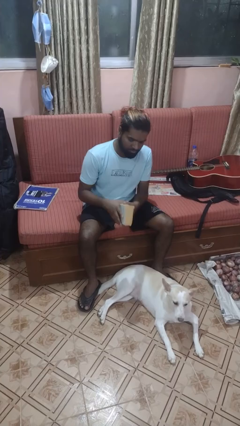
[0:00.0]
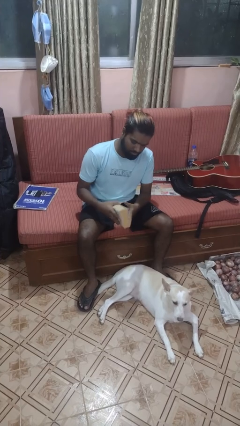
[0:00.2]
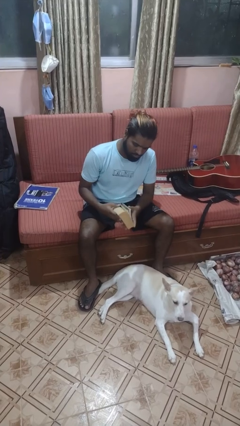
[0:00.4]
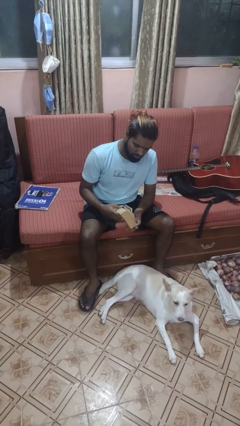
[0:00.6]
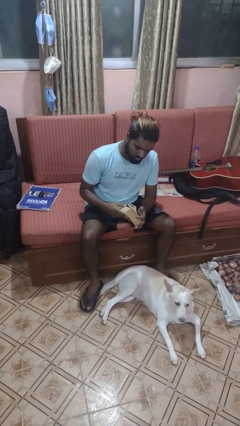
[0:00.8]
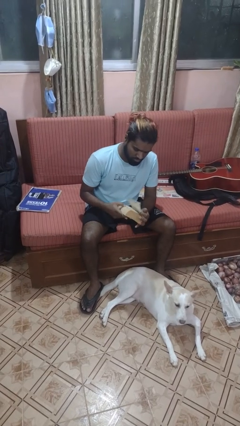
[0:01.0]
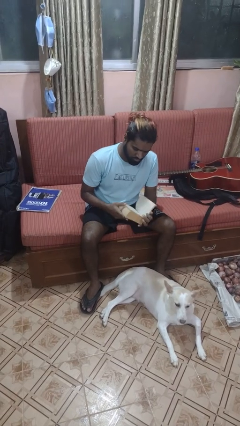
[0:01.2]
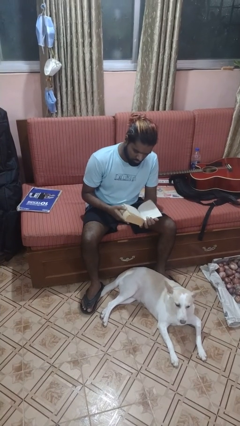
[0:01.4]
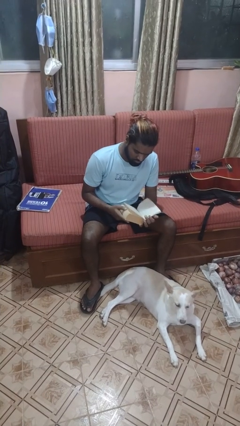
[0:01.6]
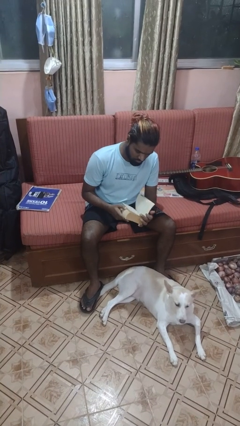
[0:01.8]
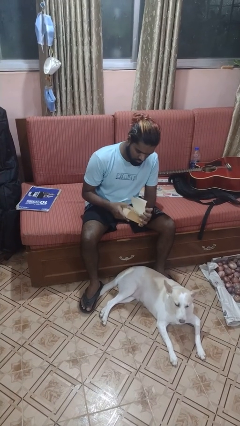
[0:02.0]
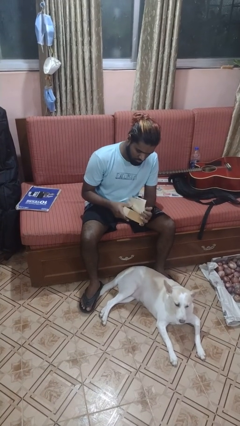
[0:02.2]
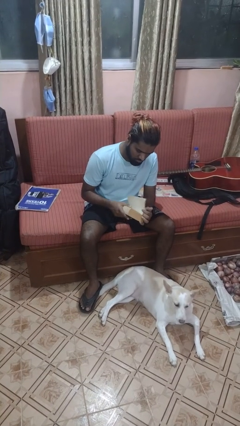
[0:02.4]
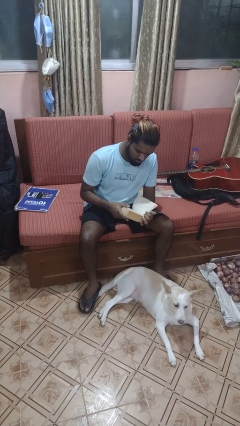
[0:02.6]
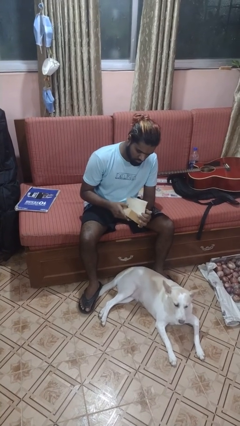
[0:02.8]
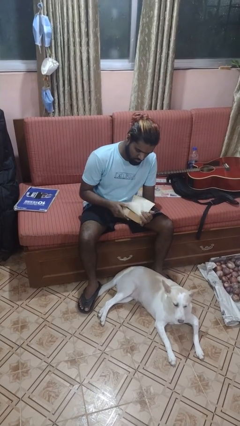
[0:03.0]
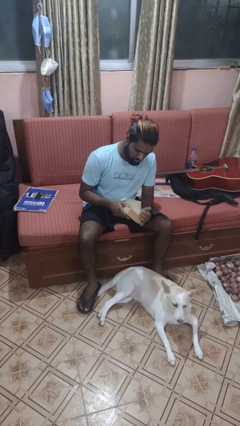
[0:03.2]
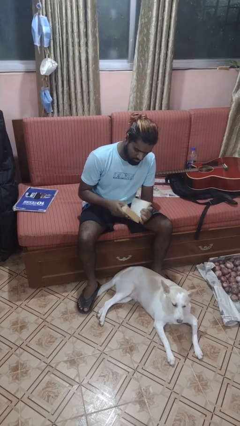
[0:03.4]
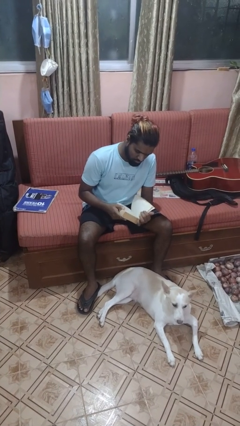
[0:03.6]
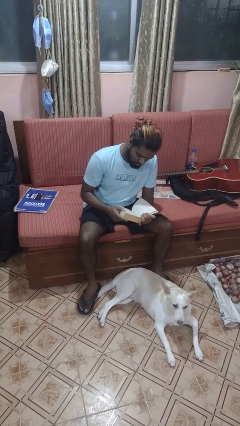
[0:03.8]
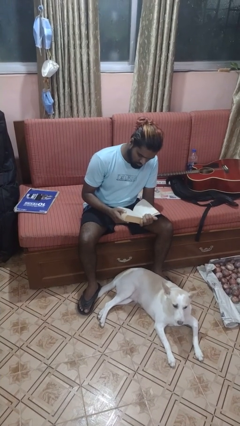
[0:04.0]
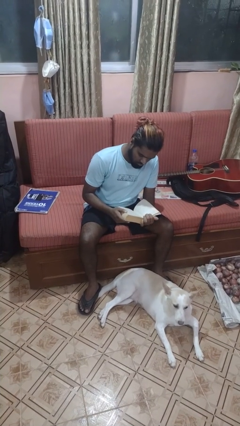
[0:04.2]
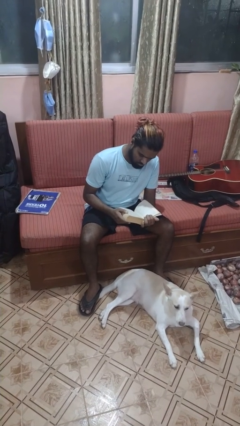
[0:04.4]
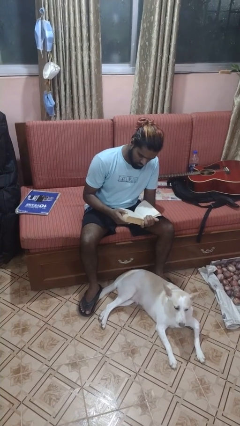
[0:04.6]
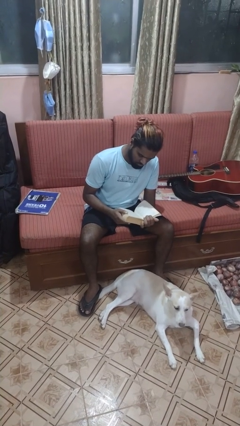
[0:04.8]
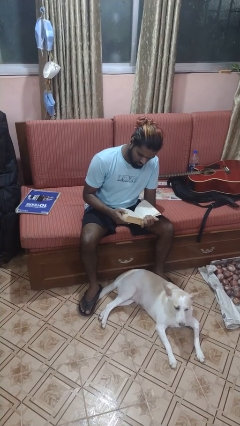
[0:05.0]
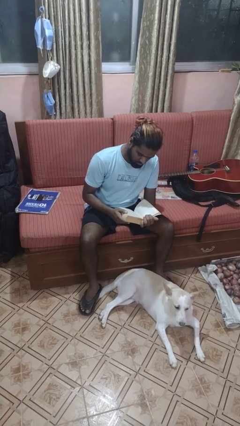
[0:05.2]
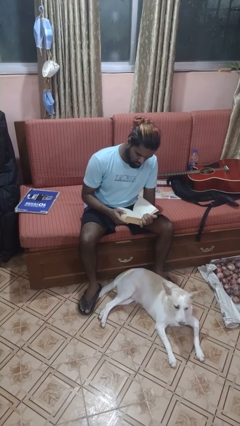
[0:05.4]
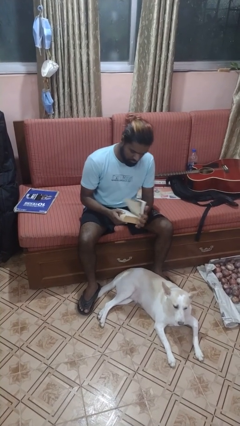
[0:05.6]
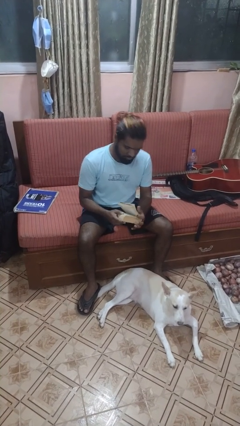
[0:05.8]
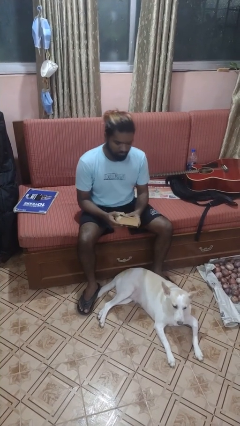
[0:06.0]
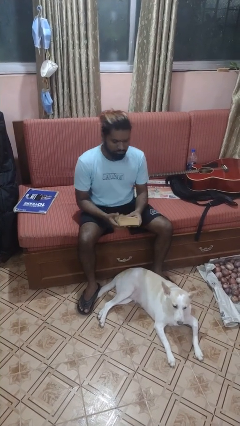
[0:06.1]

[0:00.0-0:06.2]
person reads book

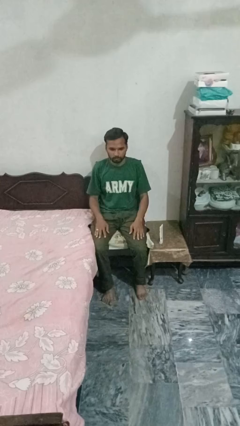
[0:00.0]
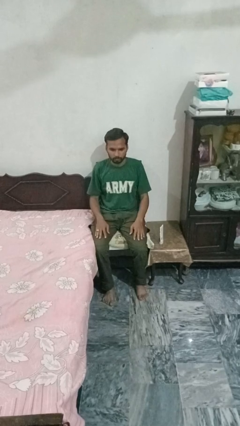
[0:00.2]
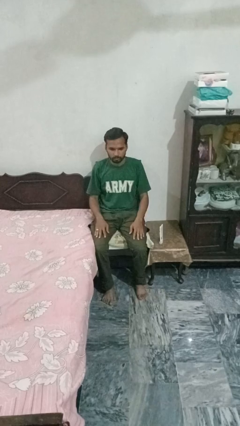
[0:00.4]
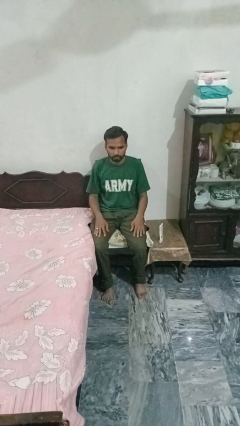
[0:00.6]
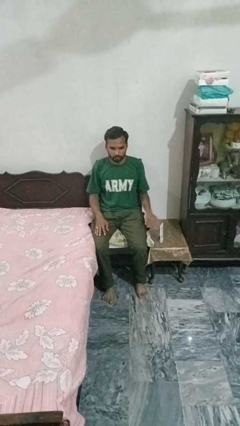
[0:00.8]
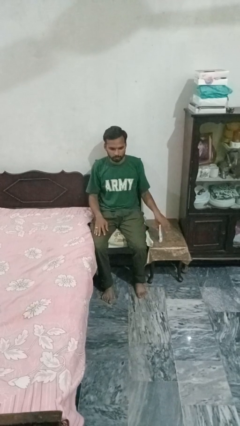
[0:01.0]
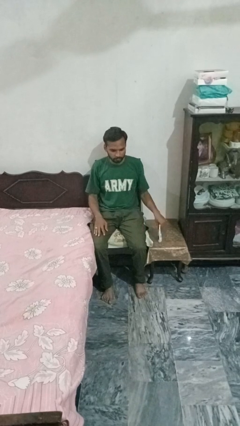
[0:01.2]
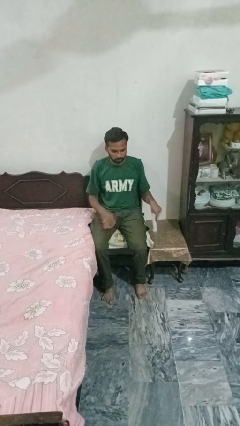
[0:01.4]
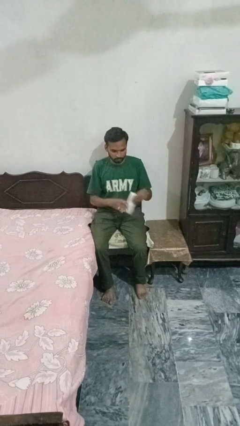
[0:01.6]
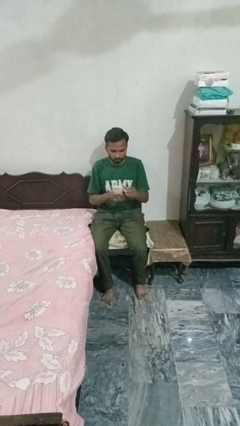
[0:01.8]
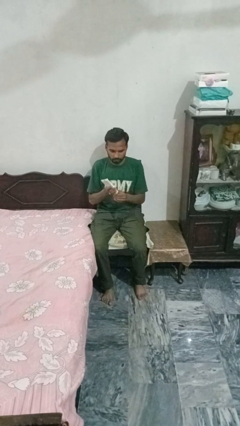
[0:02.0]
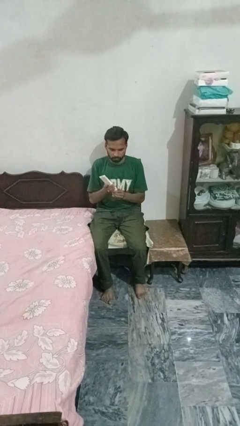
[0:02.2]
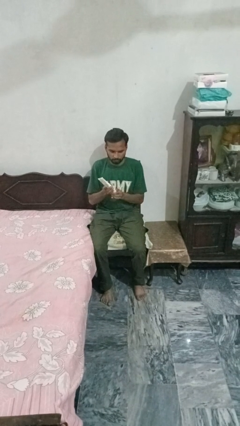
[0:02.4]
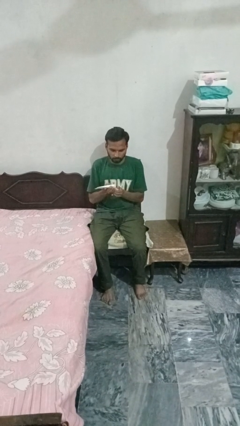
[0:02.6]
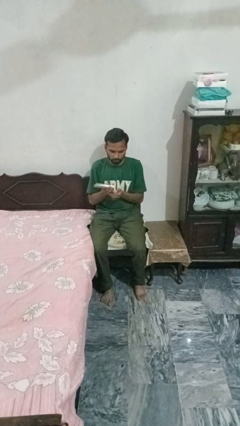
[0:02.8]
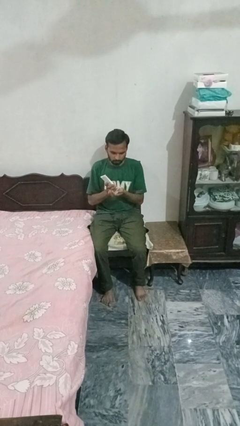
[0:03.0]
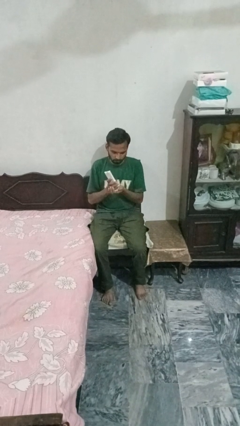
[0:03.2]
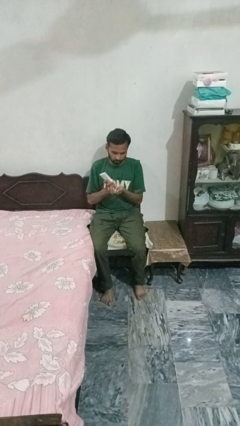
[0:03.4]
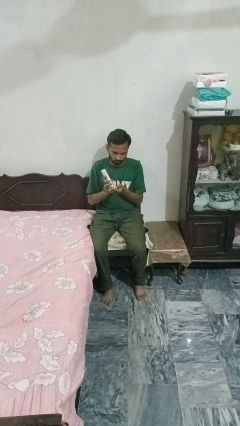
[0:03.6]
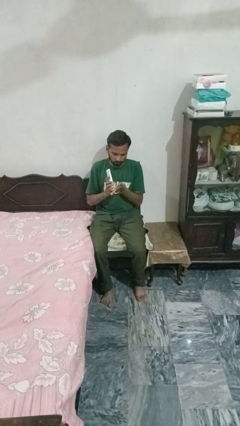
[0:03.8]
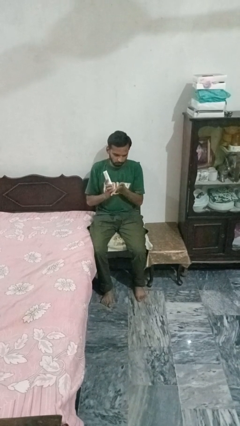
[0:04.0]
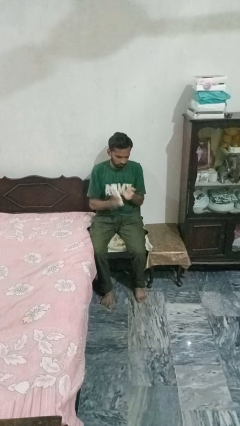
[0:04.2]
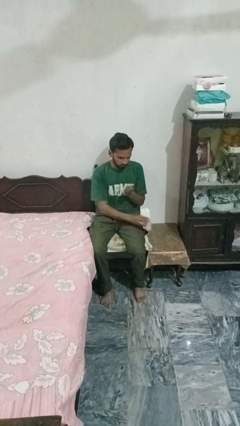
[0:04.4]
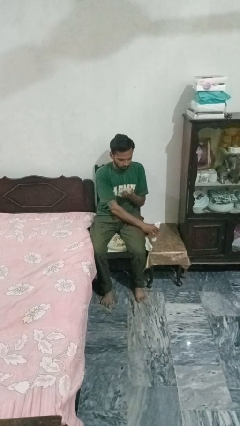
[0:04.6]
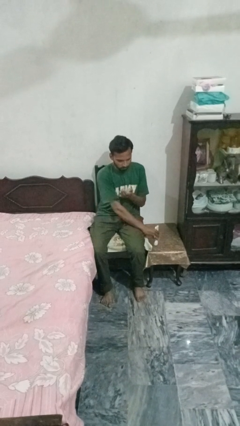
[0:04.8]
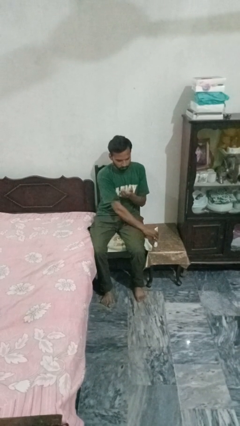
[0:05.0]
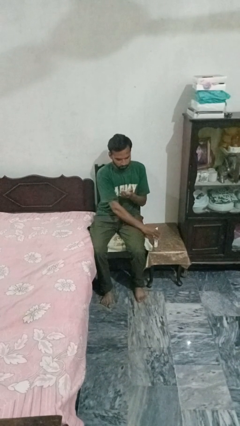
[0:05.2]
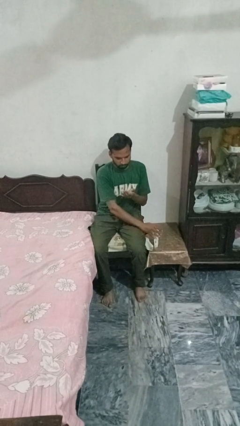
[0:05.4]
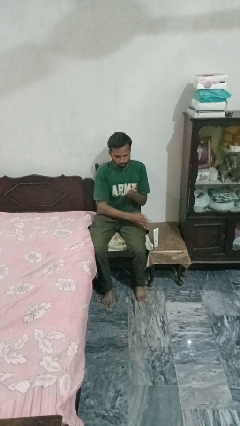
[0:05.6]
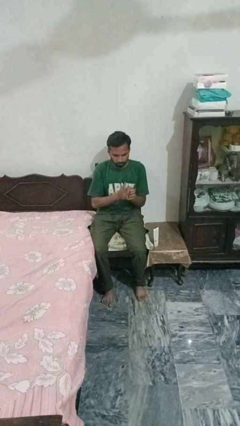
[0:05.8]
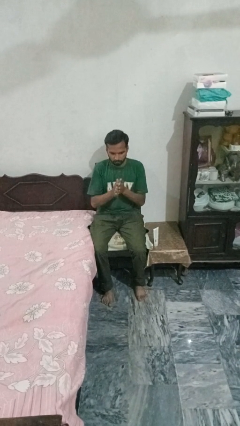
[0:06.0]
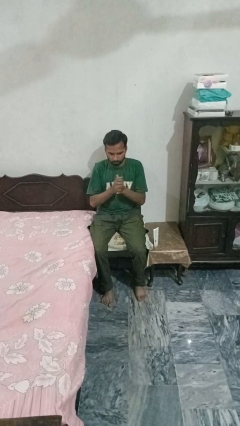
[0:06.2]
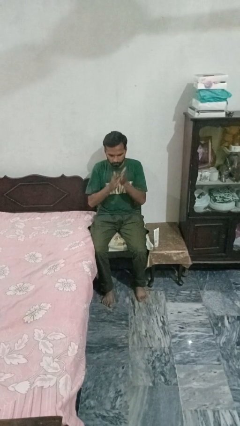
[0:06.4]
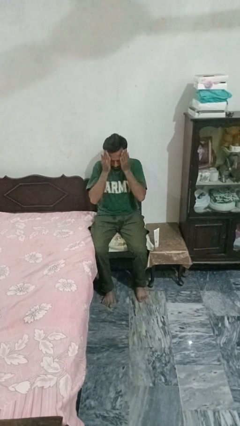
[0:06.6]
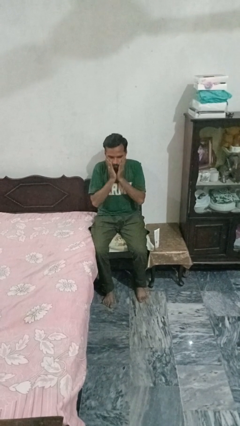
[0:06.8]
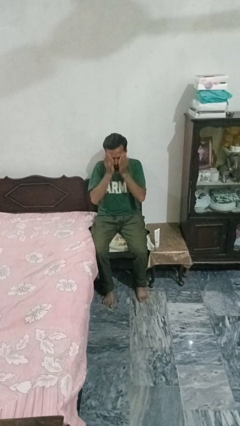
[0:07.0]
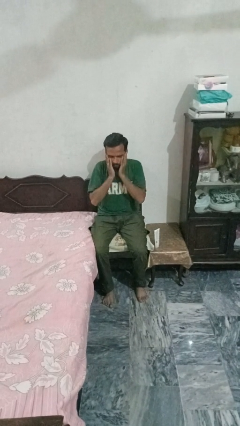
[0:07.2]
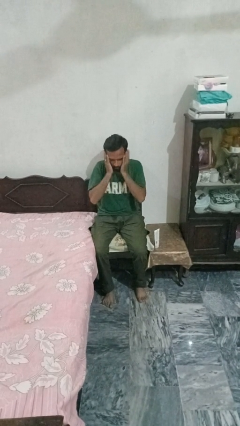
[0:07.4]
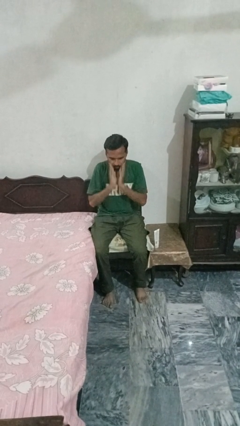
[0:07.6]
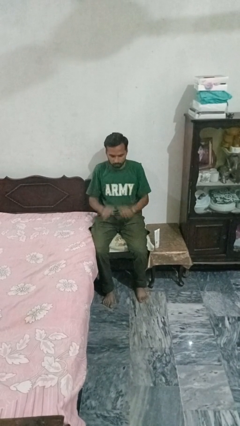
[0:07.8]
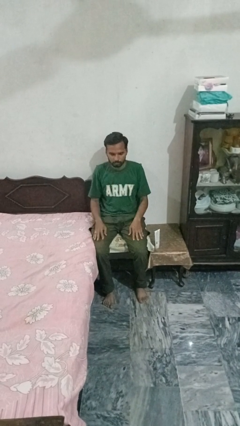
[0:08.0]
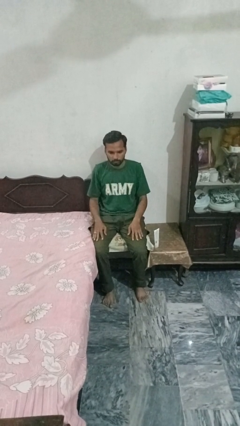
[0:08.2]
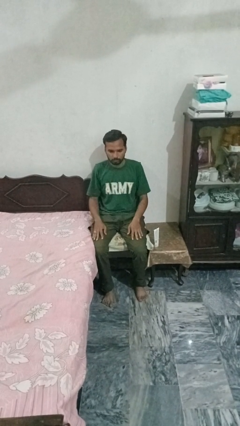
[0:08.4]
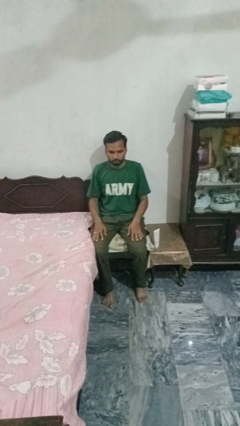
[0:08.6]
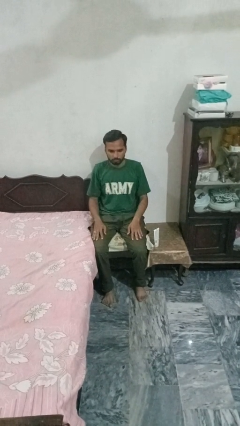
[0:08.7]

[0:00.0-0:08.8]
person applies facial moisturizer

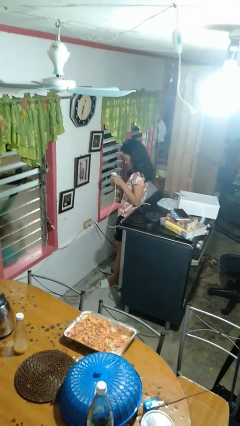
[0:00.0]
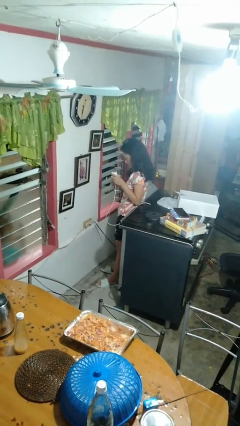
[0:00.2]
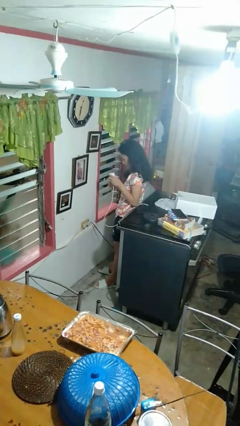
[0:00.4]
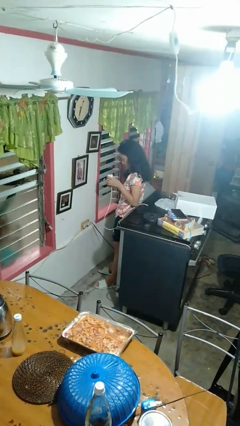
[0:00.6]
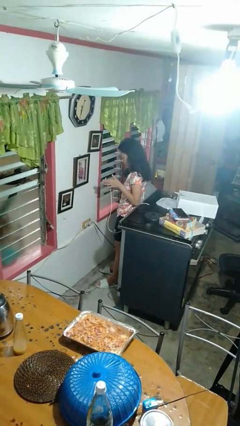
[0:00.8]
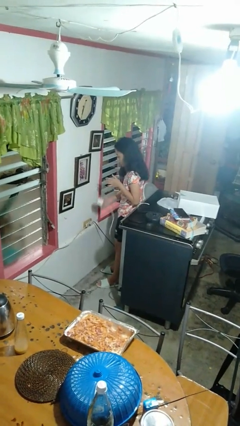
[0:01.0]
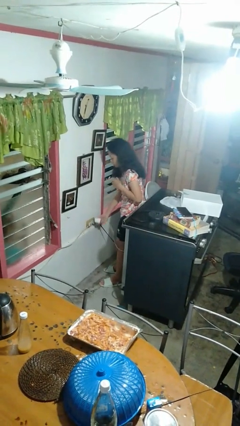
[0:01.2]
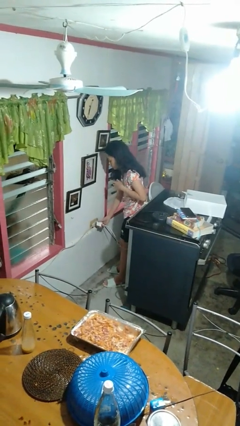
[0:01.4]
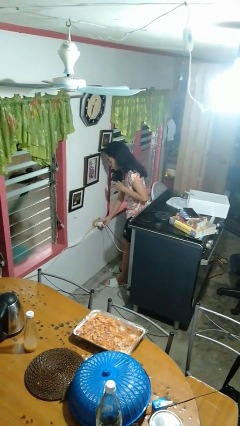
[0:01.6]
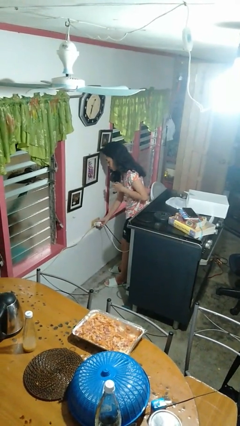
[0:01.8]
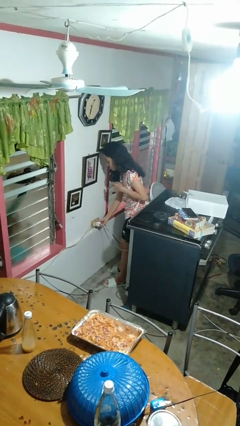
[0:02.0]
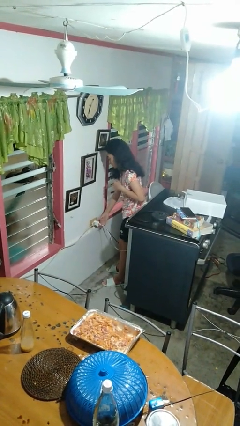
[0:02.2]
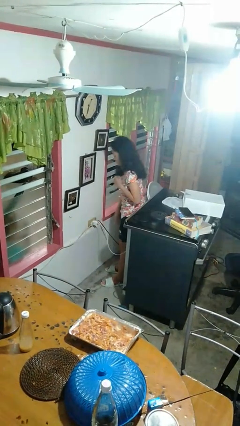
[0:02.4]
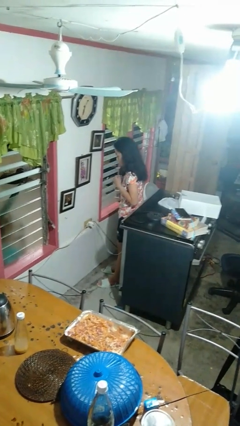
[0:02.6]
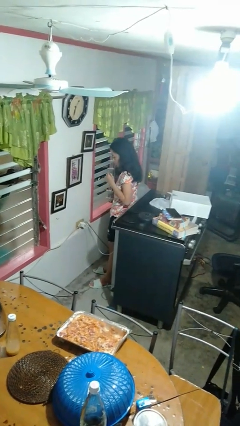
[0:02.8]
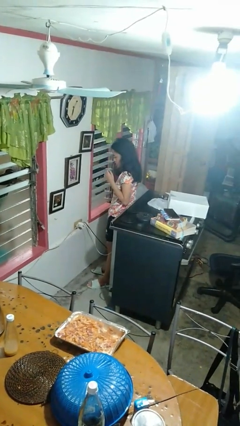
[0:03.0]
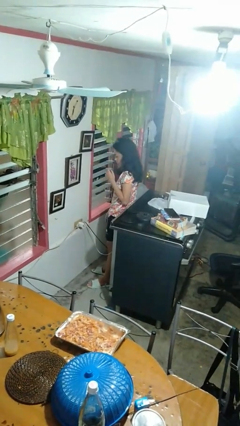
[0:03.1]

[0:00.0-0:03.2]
person plugs into electrical socket
